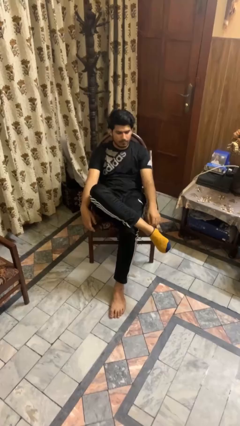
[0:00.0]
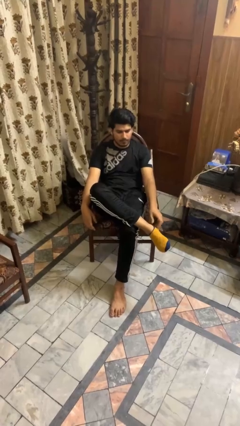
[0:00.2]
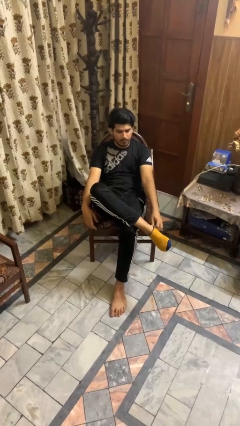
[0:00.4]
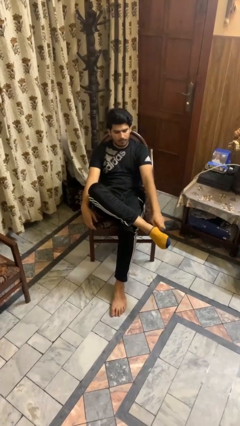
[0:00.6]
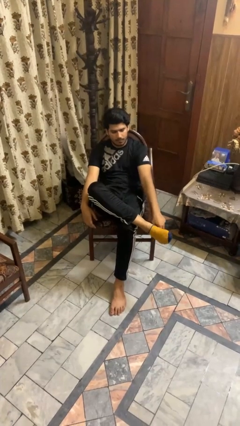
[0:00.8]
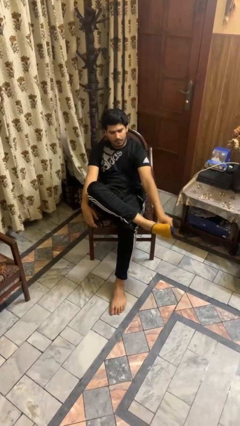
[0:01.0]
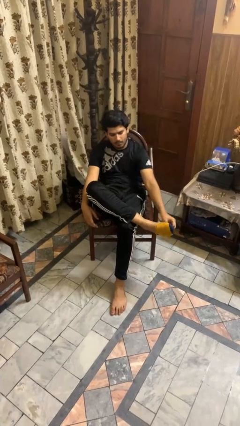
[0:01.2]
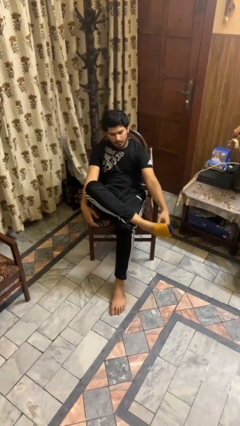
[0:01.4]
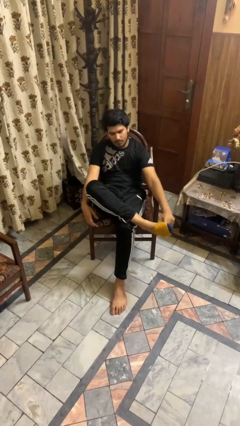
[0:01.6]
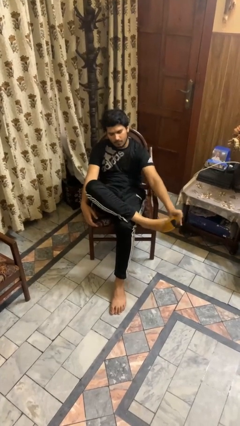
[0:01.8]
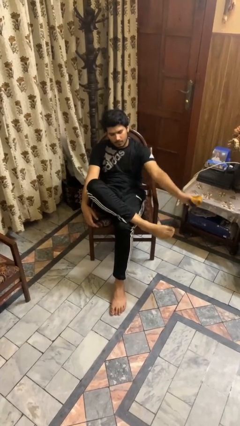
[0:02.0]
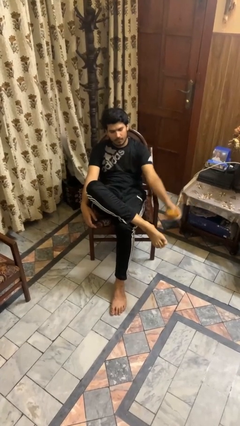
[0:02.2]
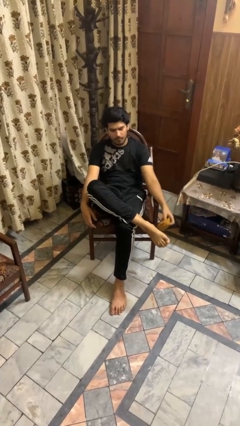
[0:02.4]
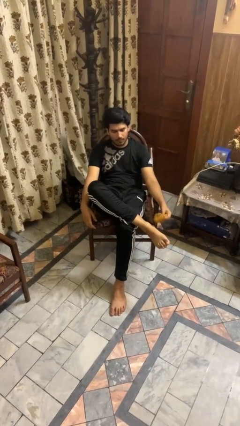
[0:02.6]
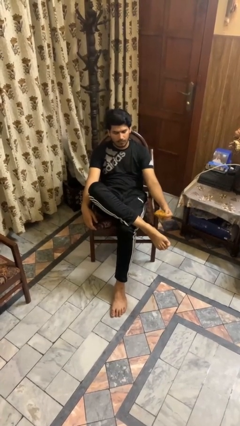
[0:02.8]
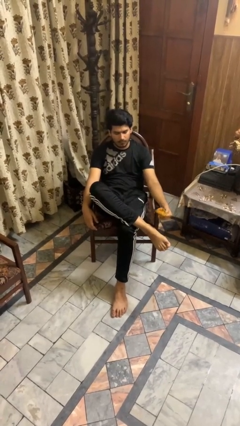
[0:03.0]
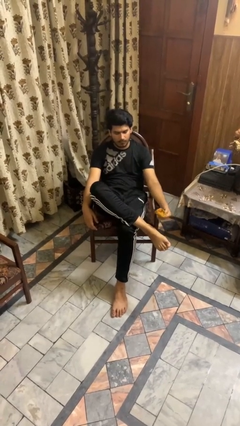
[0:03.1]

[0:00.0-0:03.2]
person takes off socks

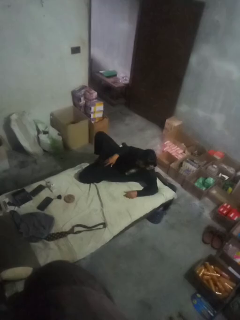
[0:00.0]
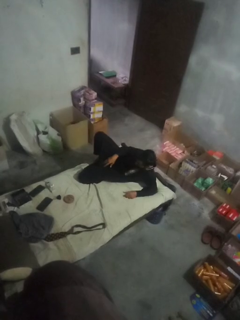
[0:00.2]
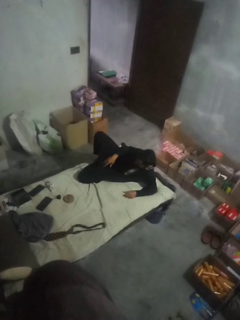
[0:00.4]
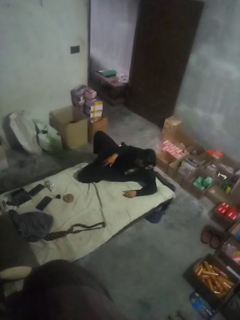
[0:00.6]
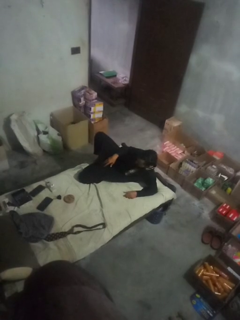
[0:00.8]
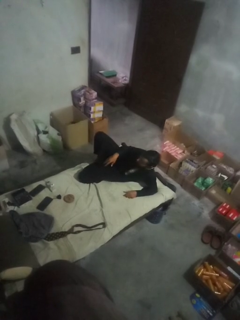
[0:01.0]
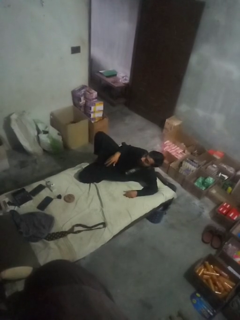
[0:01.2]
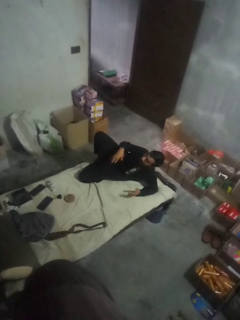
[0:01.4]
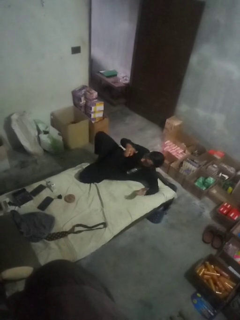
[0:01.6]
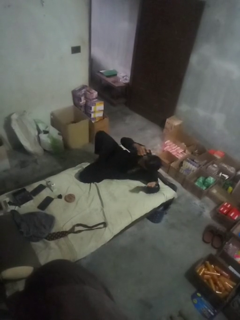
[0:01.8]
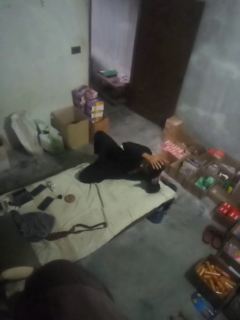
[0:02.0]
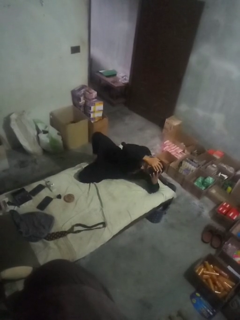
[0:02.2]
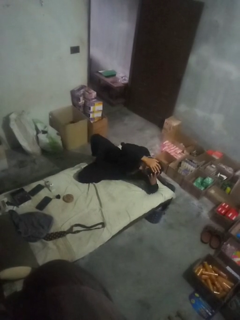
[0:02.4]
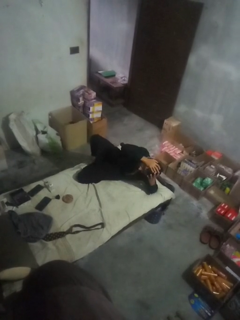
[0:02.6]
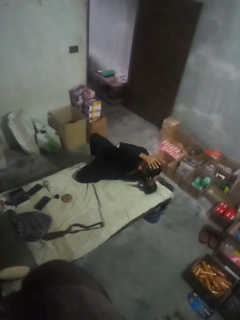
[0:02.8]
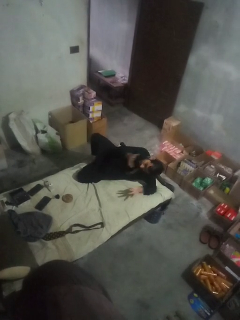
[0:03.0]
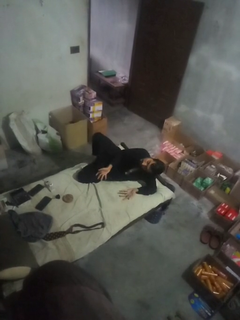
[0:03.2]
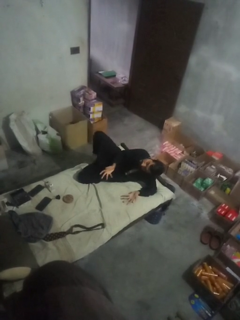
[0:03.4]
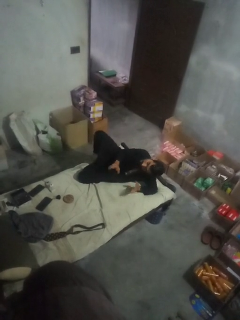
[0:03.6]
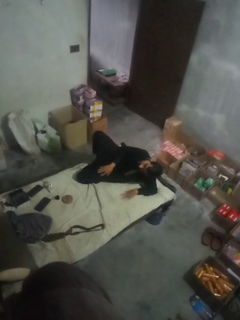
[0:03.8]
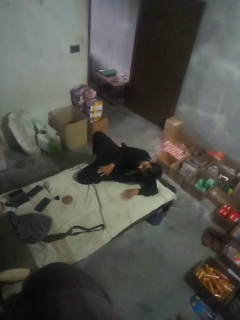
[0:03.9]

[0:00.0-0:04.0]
person pats head

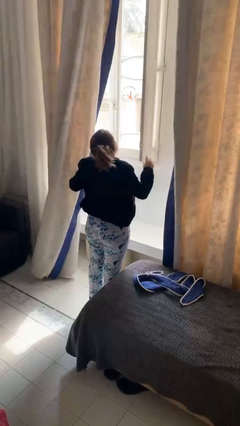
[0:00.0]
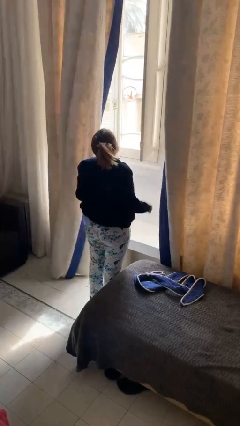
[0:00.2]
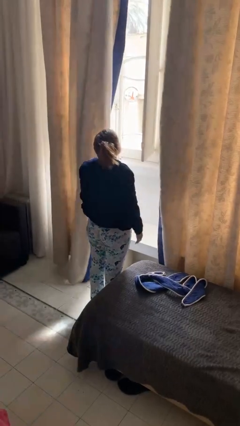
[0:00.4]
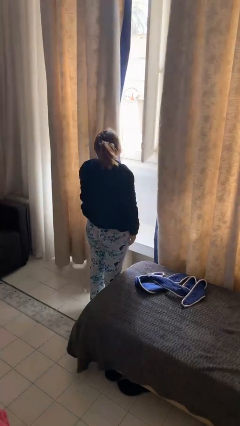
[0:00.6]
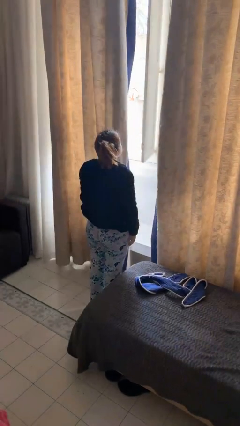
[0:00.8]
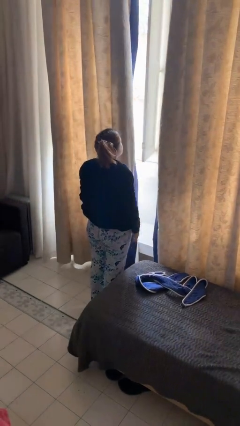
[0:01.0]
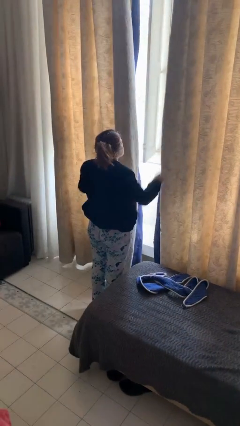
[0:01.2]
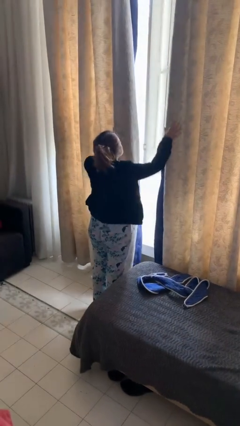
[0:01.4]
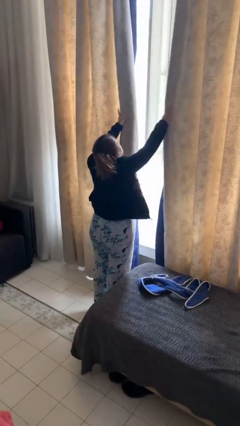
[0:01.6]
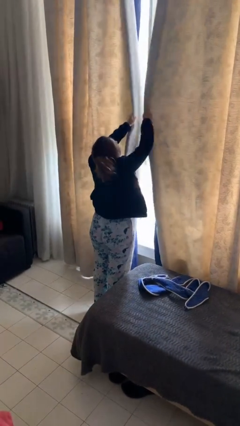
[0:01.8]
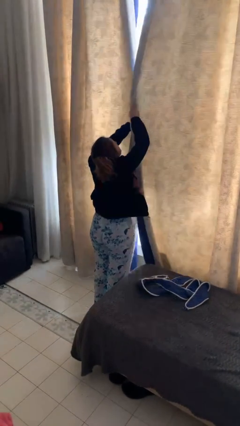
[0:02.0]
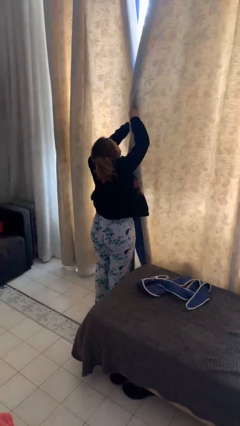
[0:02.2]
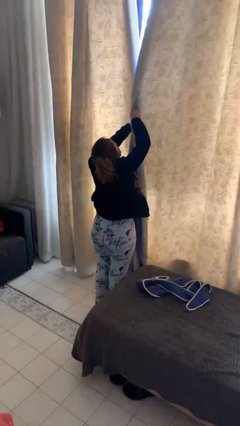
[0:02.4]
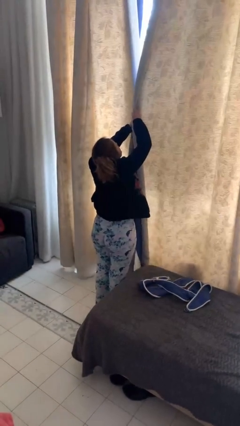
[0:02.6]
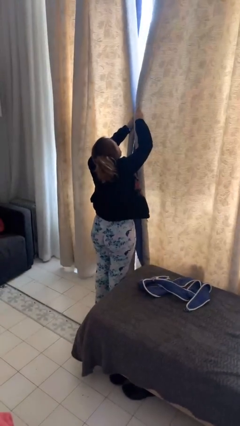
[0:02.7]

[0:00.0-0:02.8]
person closes curtains

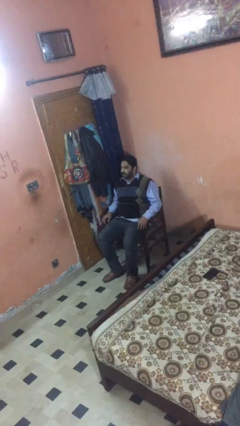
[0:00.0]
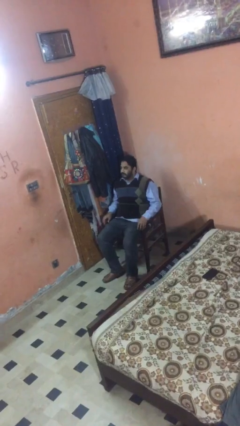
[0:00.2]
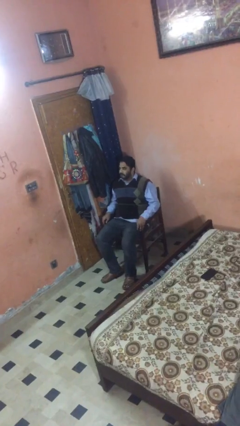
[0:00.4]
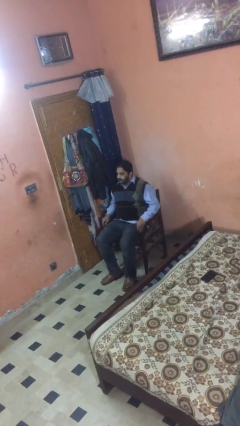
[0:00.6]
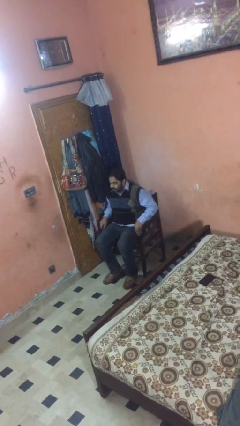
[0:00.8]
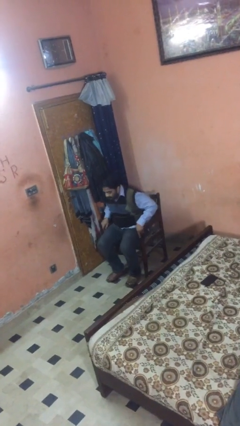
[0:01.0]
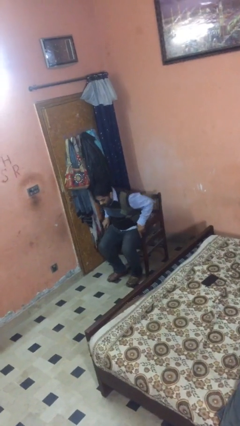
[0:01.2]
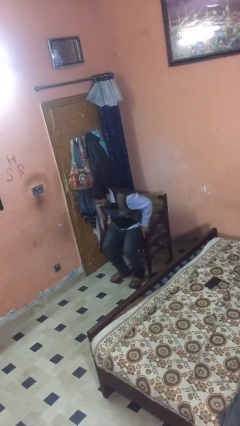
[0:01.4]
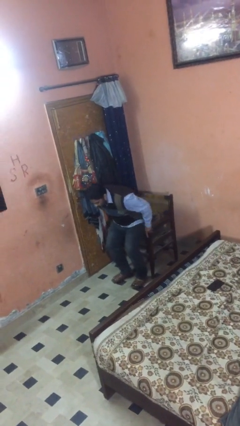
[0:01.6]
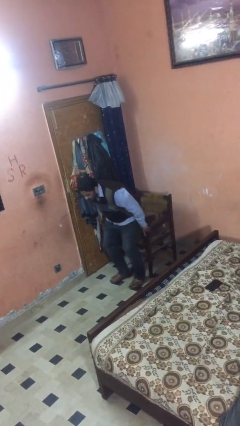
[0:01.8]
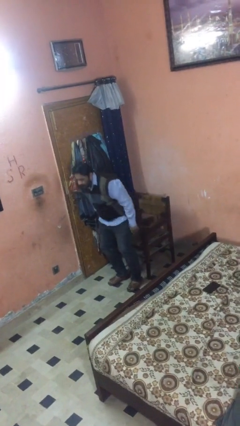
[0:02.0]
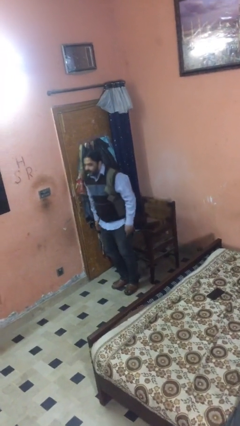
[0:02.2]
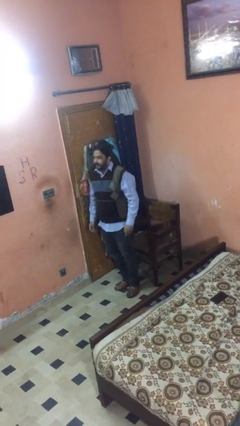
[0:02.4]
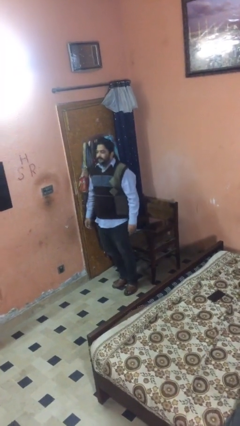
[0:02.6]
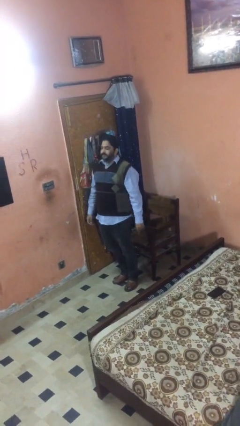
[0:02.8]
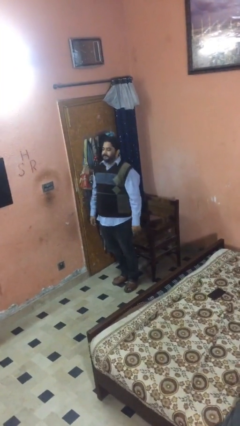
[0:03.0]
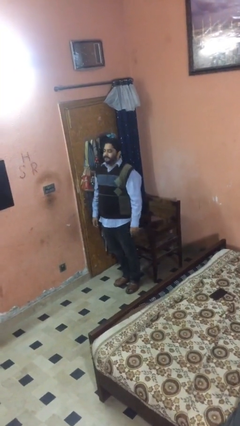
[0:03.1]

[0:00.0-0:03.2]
person stands up

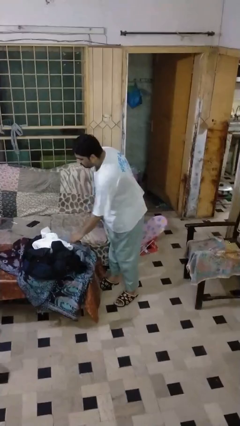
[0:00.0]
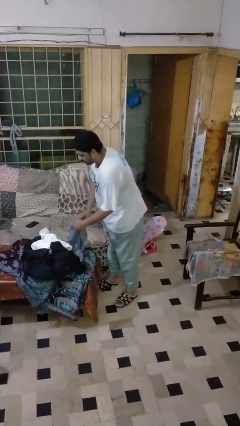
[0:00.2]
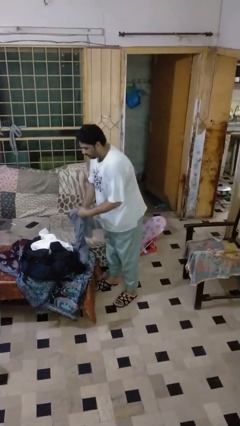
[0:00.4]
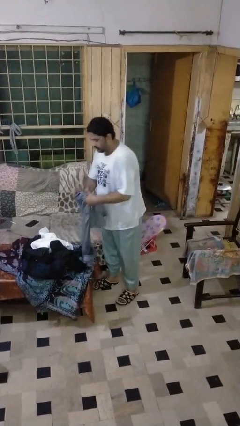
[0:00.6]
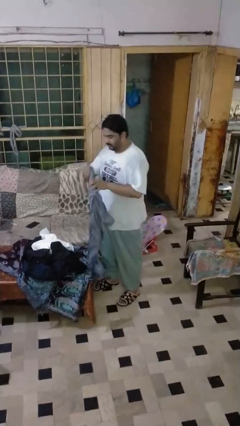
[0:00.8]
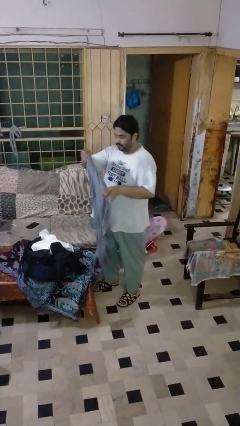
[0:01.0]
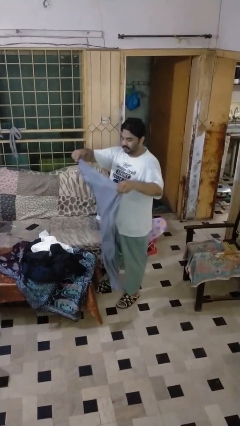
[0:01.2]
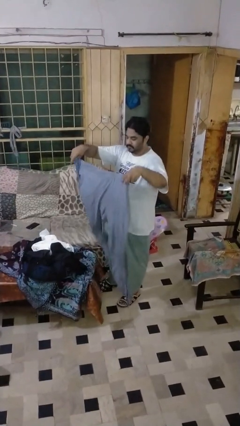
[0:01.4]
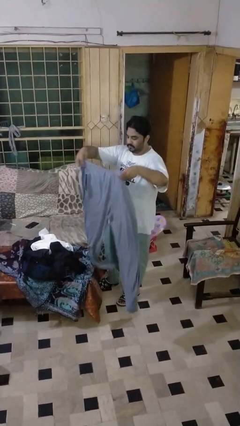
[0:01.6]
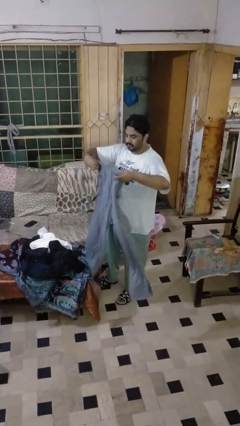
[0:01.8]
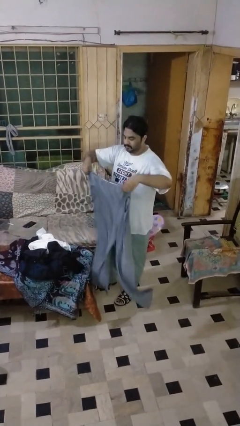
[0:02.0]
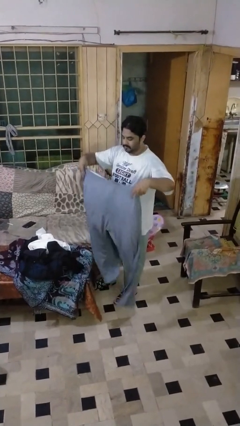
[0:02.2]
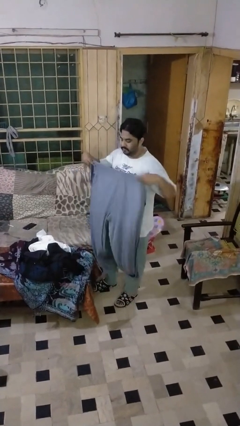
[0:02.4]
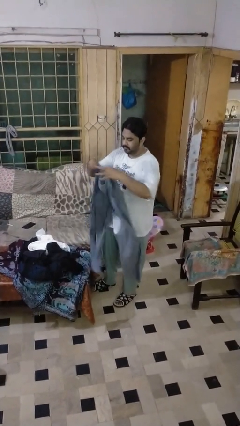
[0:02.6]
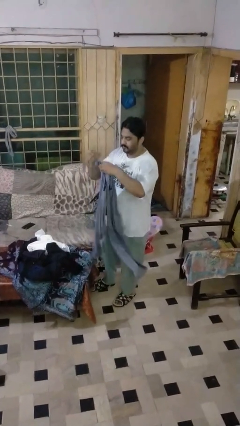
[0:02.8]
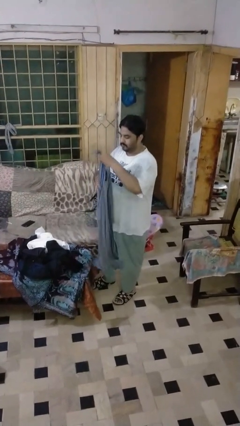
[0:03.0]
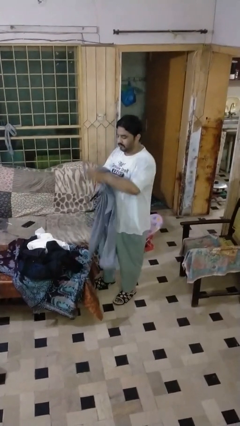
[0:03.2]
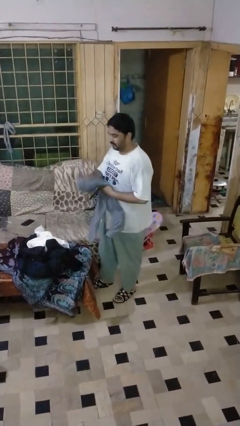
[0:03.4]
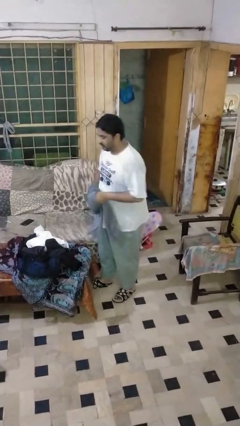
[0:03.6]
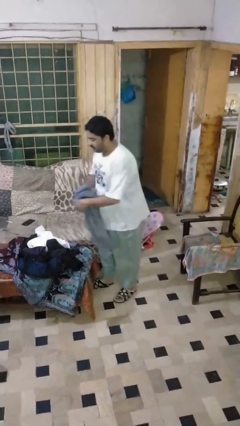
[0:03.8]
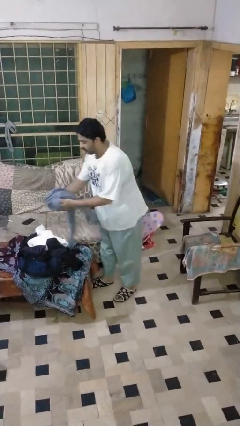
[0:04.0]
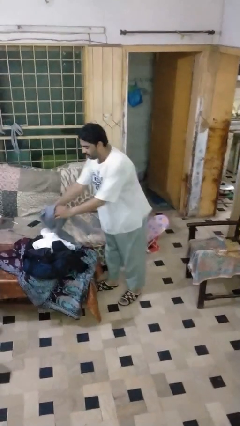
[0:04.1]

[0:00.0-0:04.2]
person folds pants

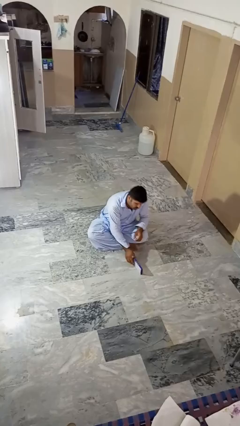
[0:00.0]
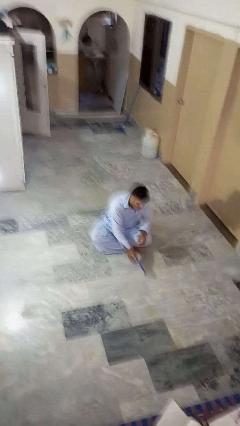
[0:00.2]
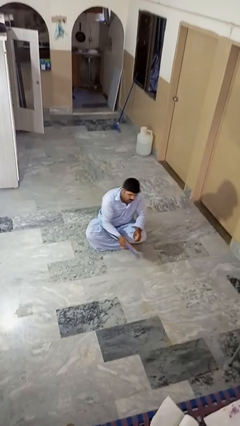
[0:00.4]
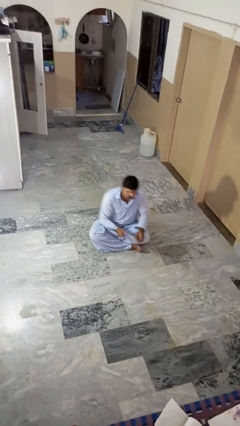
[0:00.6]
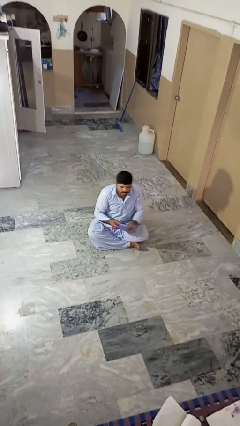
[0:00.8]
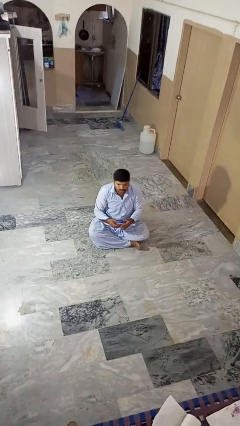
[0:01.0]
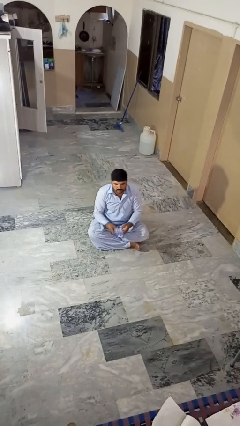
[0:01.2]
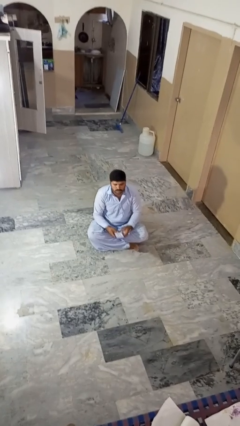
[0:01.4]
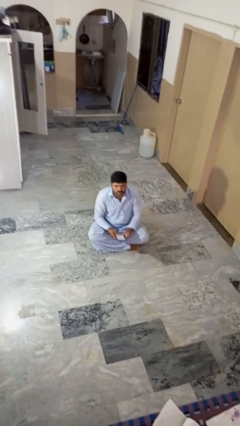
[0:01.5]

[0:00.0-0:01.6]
person picks up object from floor
